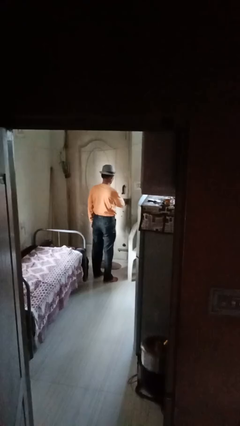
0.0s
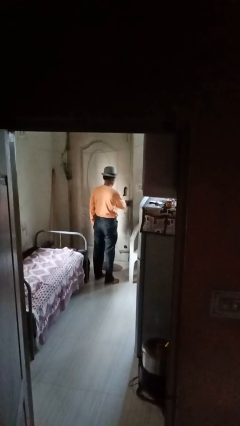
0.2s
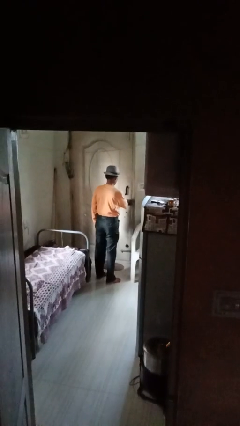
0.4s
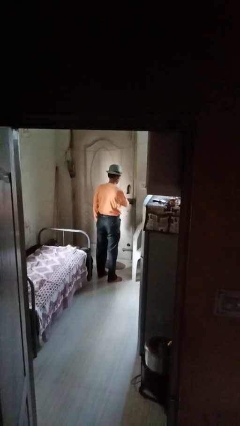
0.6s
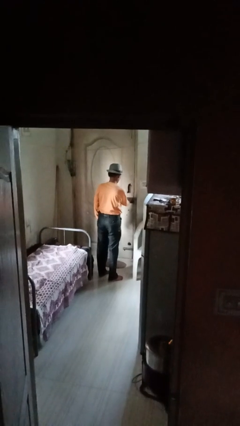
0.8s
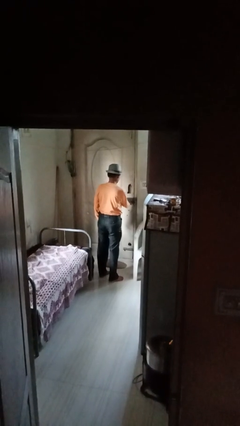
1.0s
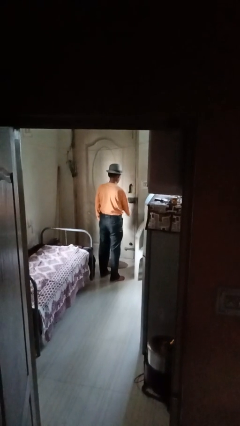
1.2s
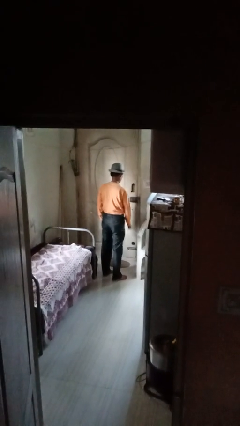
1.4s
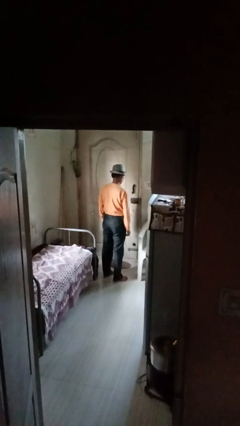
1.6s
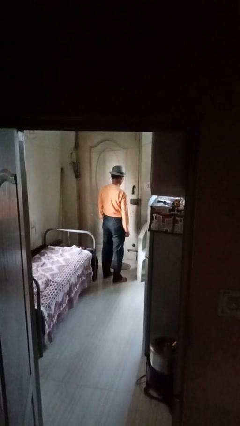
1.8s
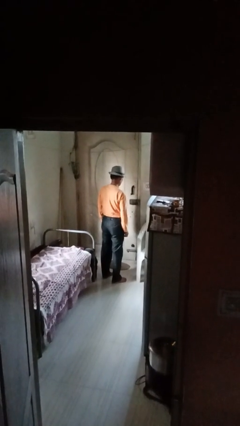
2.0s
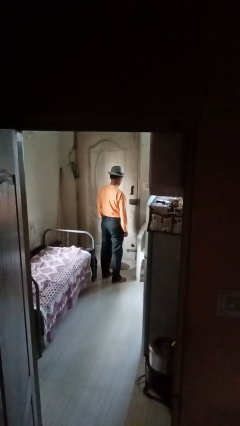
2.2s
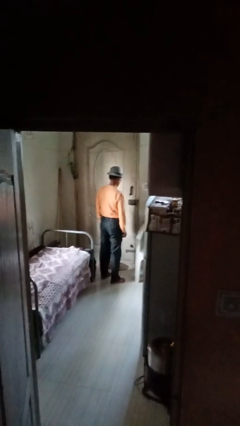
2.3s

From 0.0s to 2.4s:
person locks door with keys

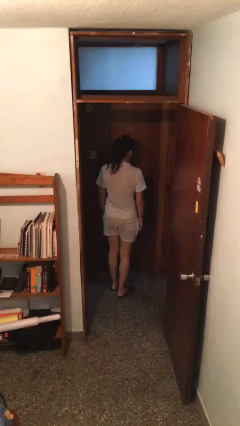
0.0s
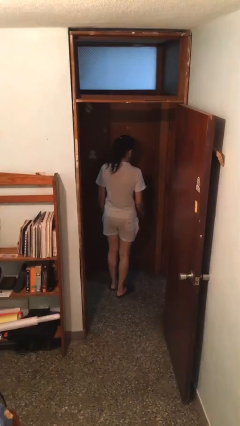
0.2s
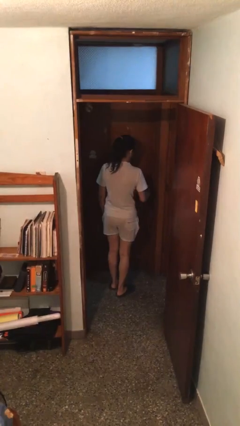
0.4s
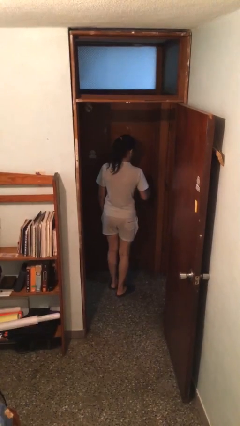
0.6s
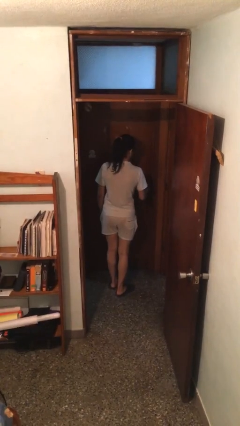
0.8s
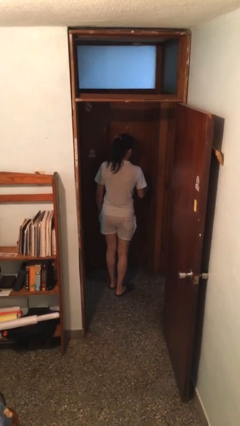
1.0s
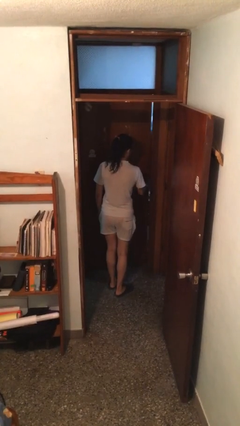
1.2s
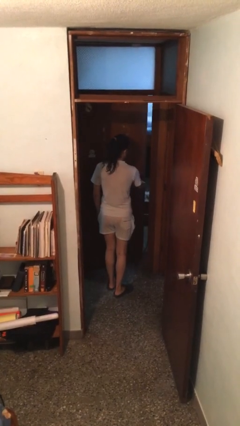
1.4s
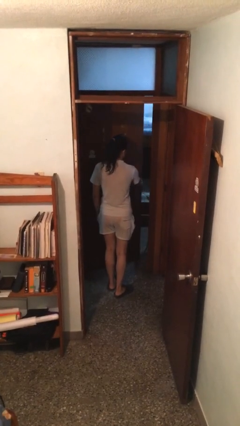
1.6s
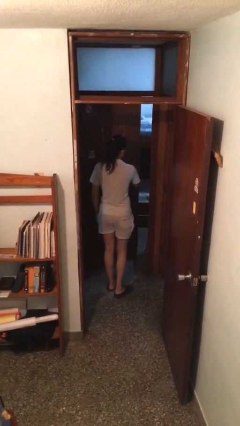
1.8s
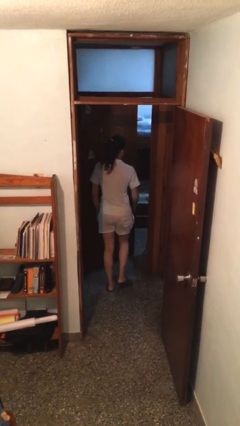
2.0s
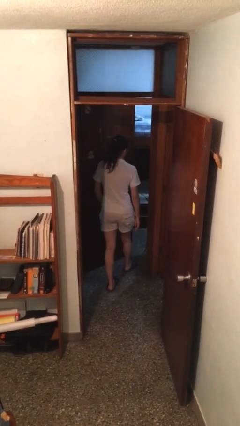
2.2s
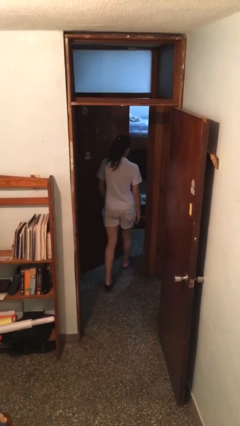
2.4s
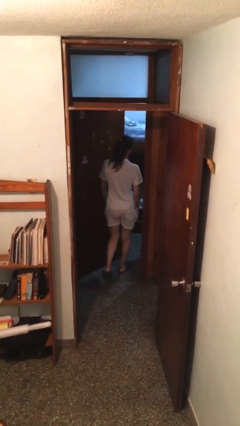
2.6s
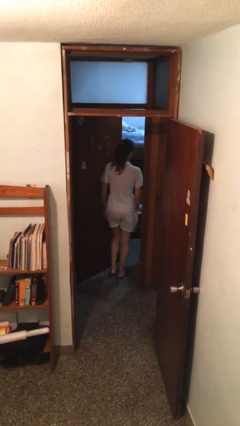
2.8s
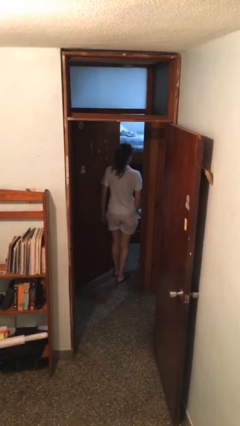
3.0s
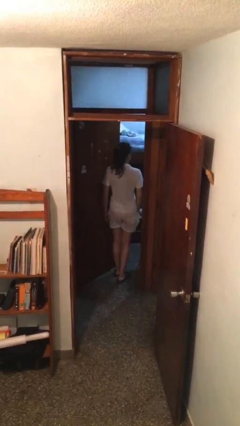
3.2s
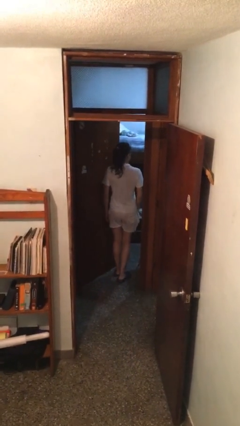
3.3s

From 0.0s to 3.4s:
person opens facility door

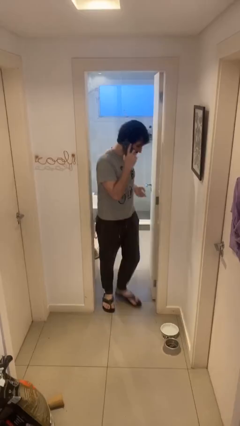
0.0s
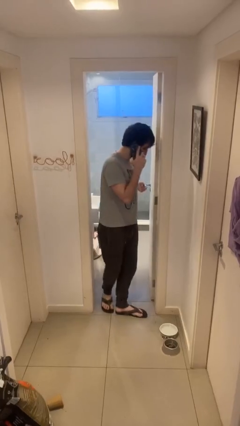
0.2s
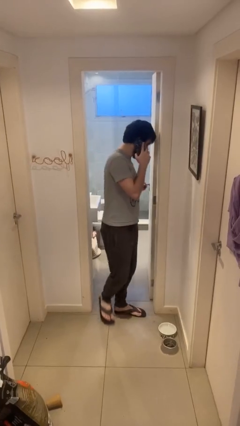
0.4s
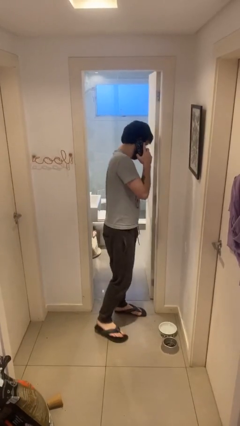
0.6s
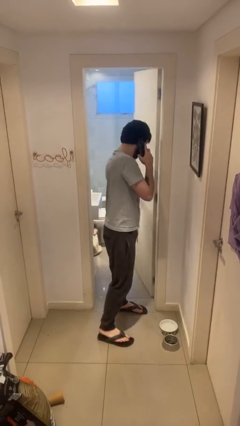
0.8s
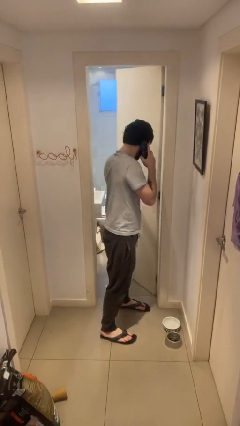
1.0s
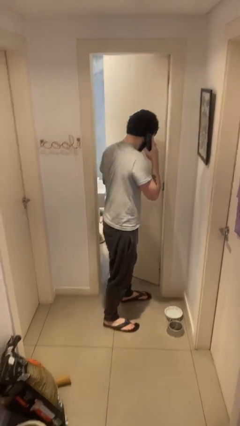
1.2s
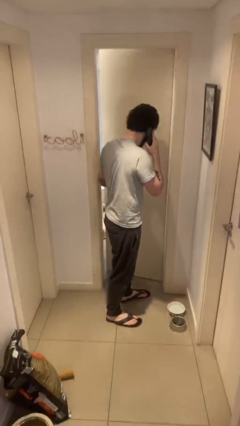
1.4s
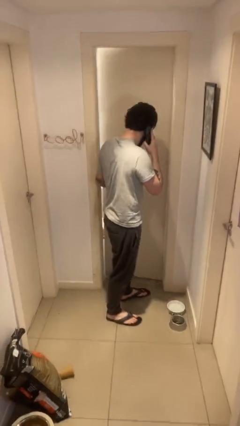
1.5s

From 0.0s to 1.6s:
person enters scene through structure

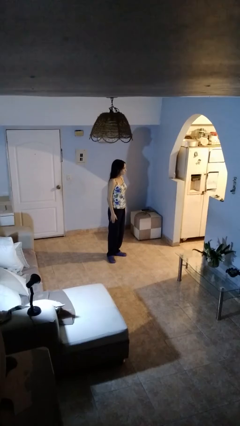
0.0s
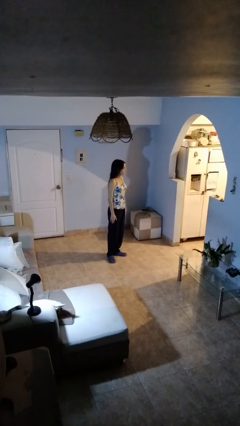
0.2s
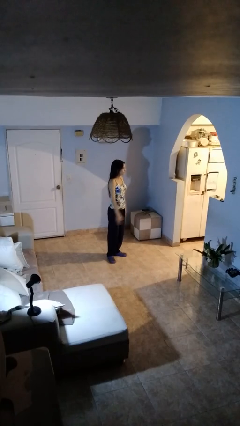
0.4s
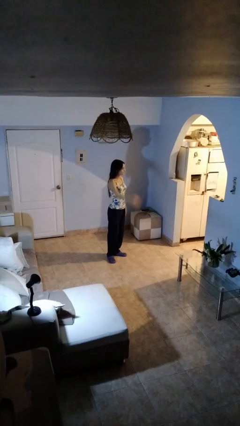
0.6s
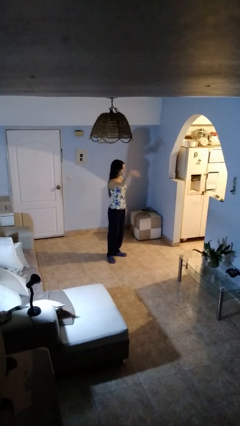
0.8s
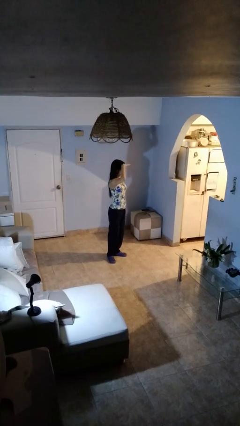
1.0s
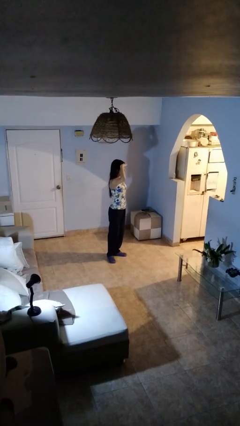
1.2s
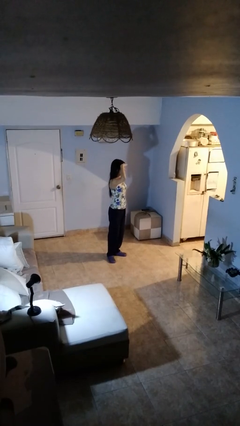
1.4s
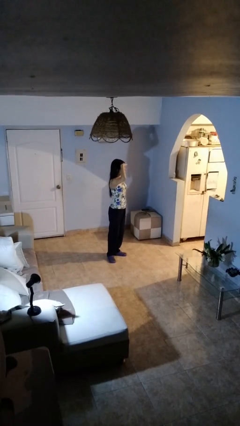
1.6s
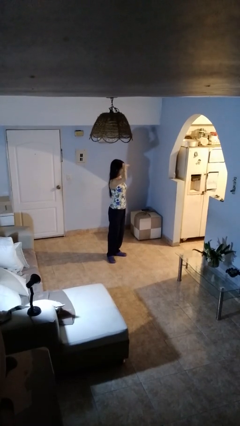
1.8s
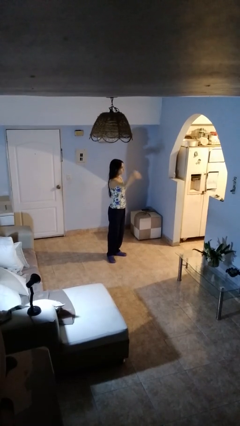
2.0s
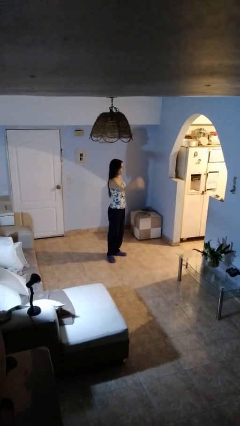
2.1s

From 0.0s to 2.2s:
person salutes

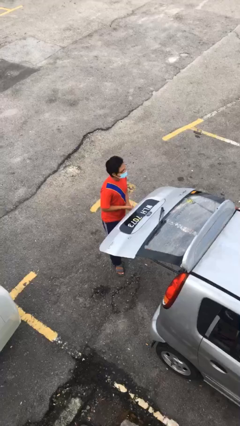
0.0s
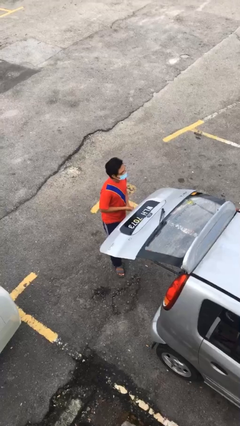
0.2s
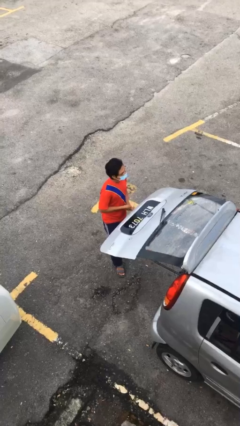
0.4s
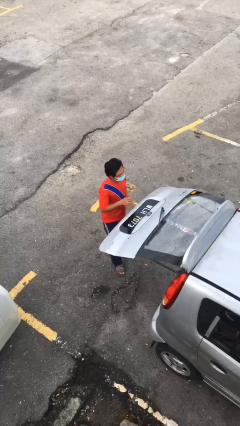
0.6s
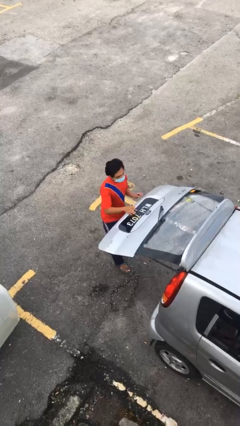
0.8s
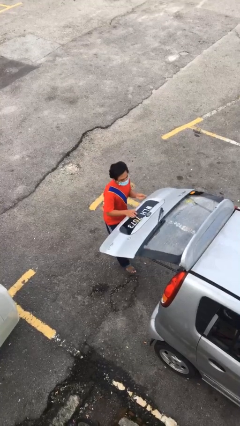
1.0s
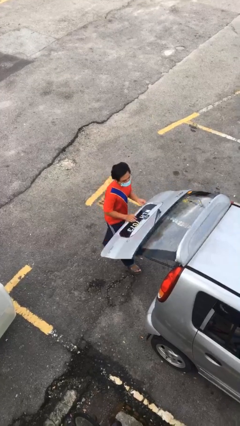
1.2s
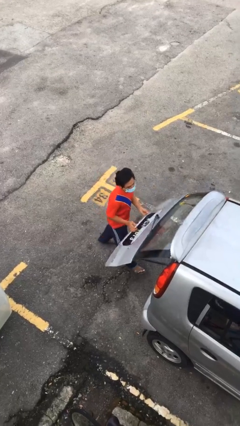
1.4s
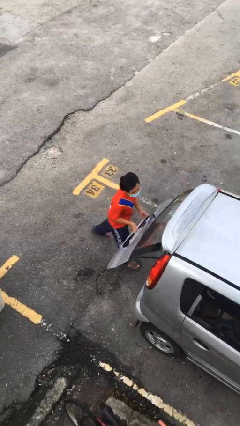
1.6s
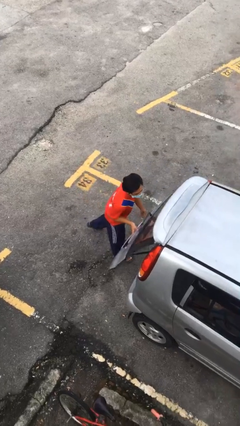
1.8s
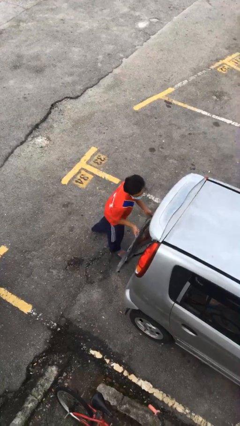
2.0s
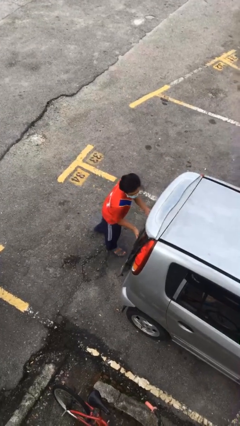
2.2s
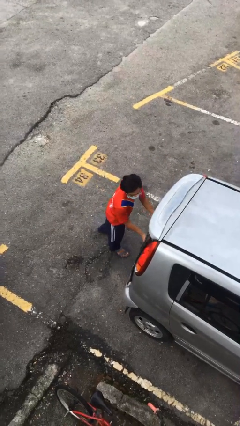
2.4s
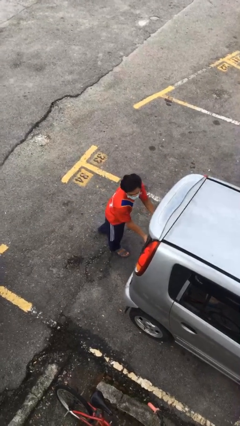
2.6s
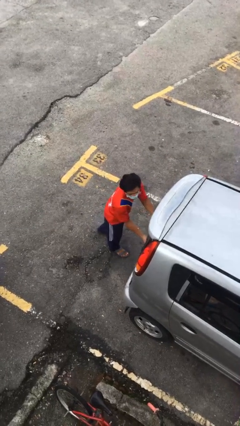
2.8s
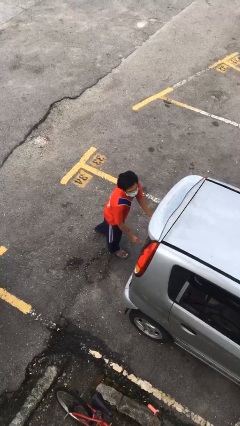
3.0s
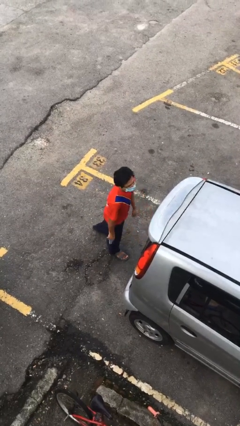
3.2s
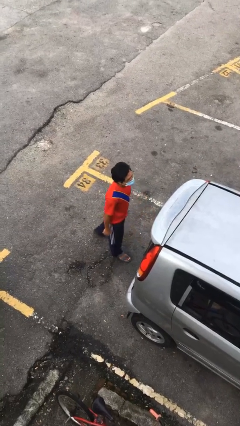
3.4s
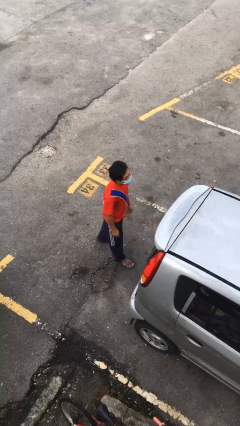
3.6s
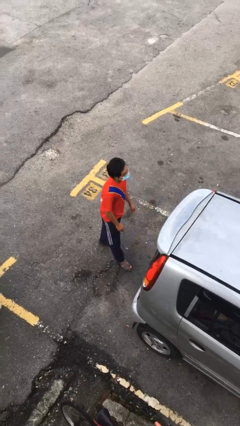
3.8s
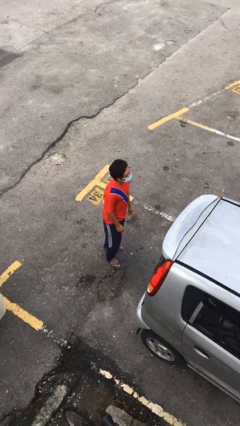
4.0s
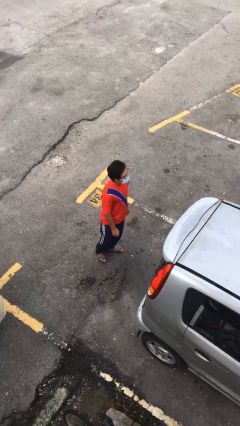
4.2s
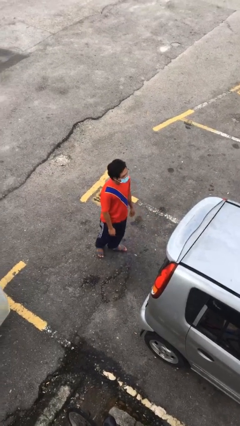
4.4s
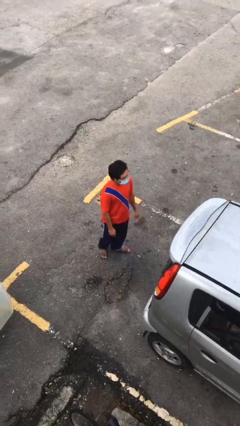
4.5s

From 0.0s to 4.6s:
person closes car trunk

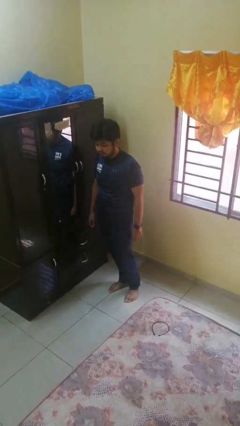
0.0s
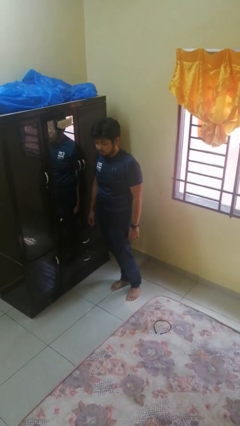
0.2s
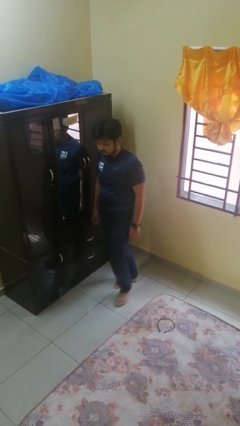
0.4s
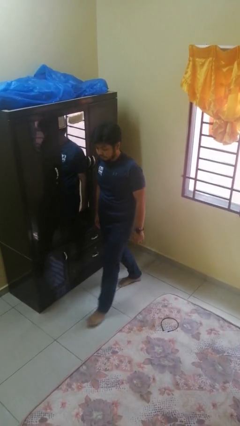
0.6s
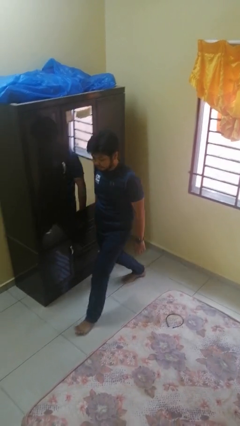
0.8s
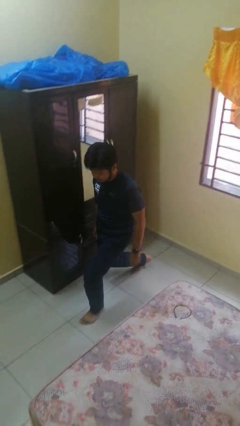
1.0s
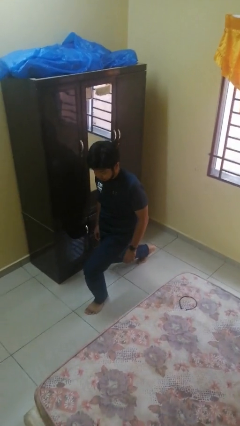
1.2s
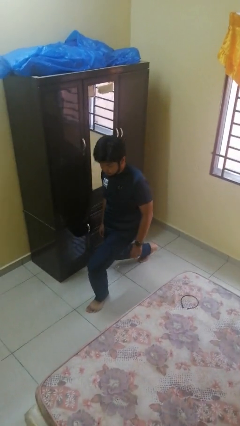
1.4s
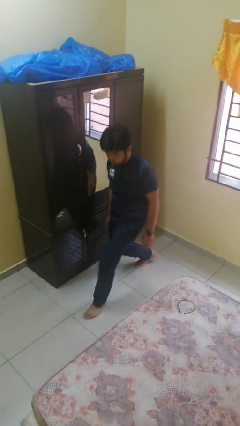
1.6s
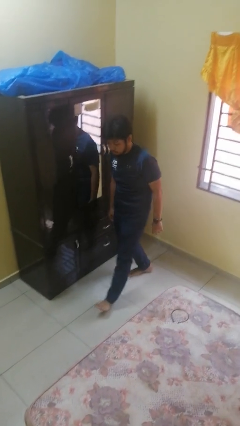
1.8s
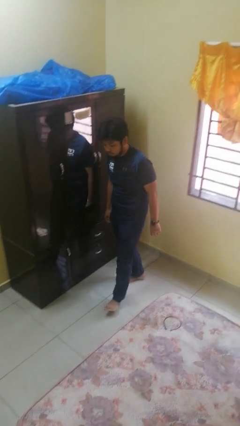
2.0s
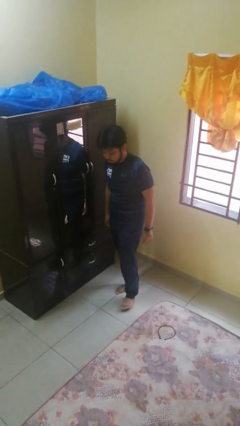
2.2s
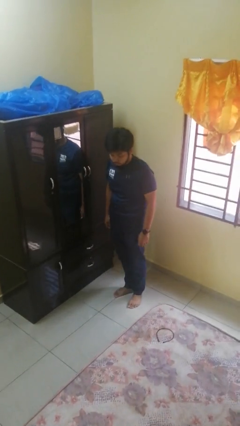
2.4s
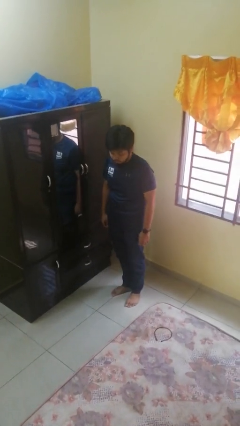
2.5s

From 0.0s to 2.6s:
person exercises with lunges

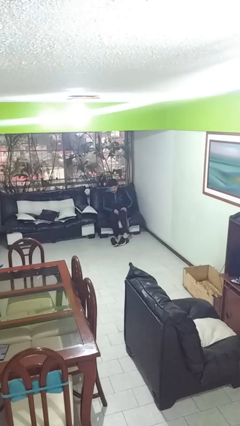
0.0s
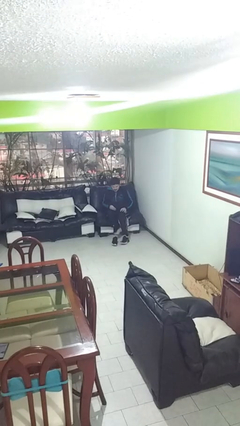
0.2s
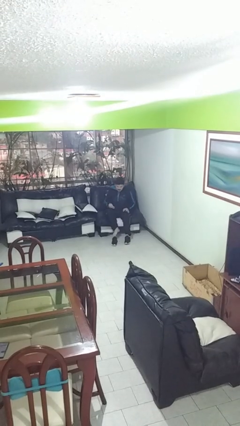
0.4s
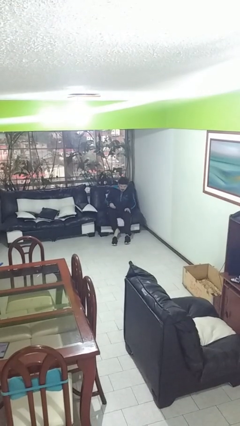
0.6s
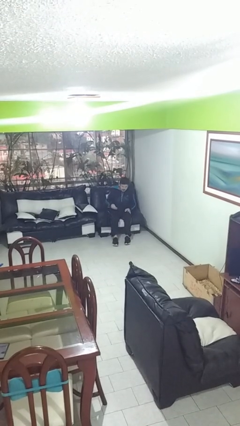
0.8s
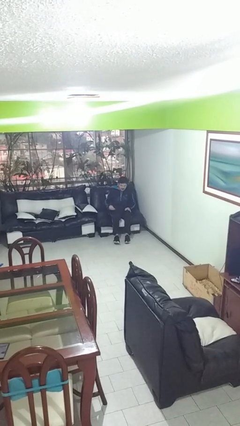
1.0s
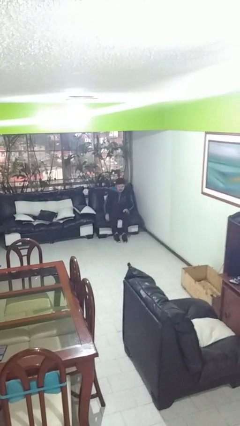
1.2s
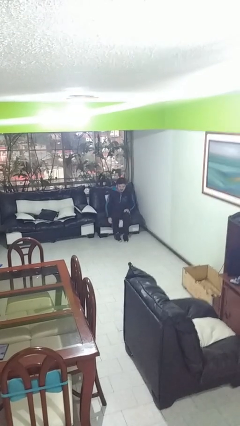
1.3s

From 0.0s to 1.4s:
person puts on shoes
